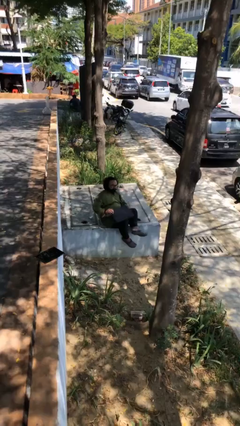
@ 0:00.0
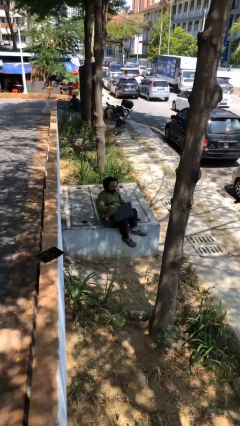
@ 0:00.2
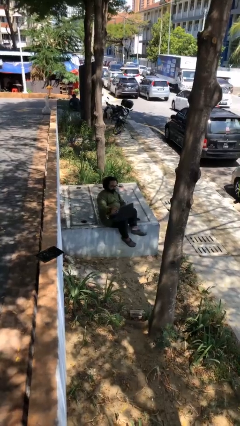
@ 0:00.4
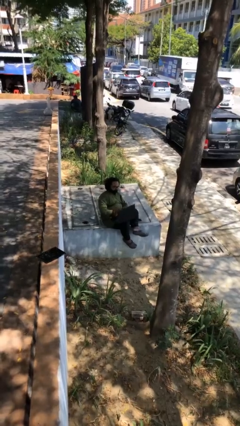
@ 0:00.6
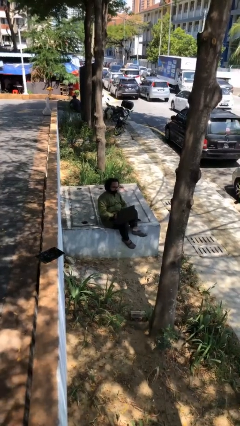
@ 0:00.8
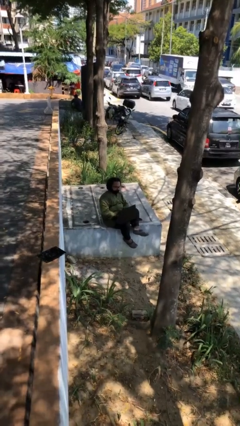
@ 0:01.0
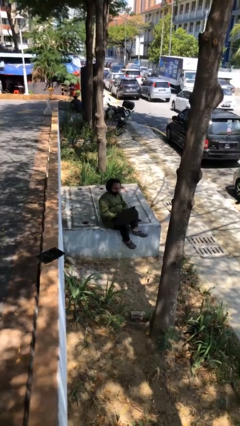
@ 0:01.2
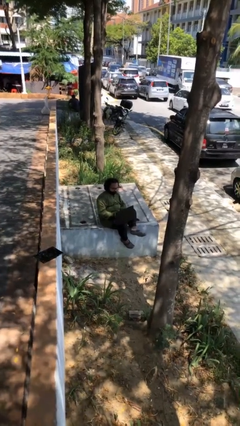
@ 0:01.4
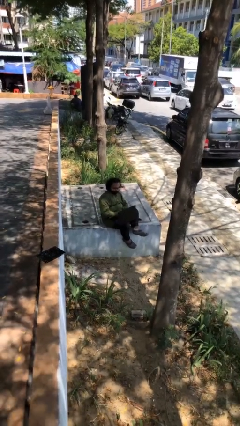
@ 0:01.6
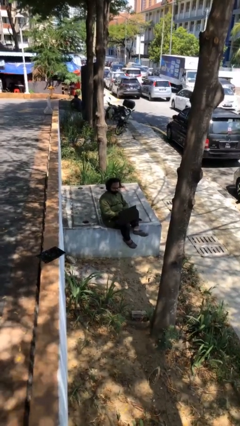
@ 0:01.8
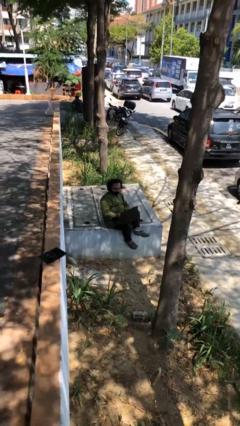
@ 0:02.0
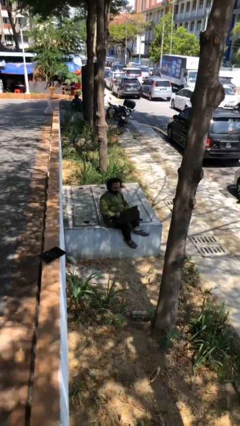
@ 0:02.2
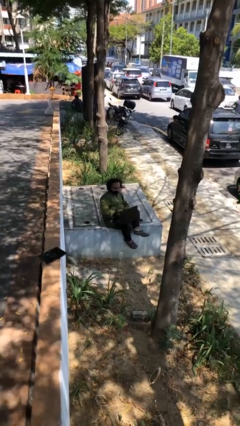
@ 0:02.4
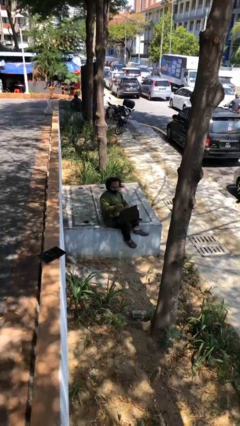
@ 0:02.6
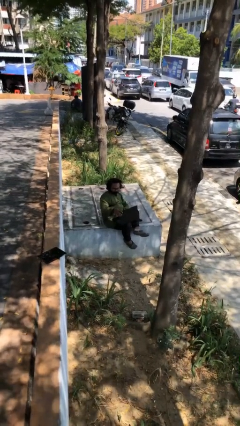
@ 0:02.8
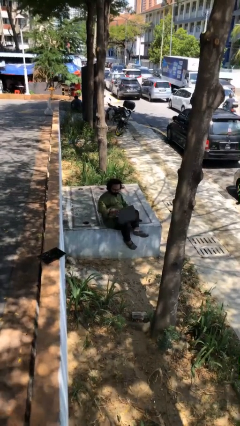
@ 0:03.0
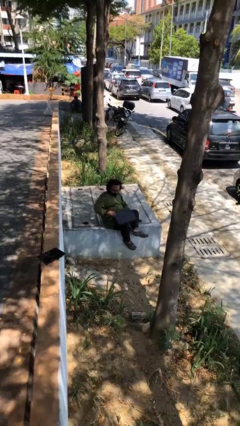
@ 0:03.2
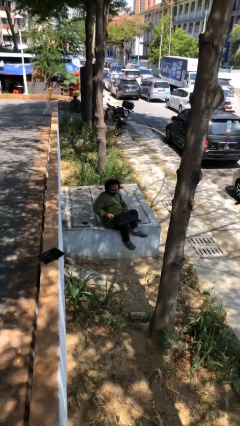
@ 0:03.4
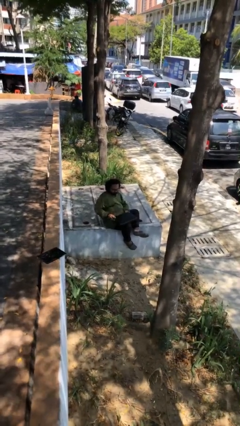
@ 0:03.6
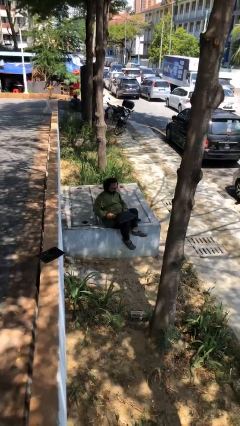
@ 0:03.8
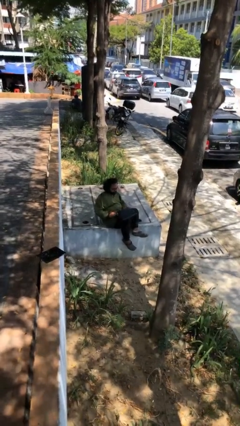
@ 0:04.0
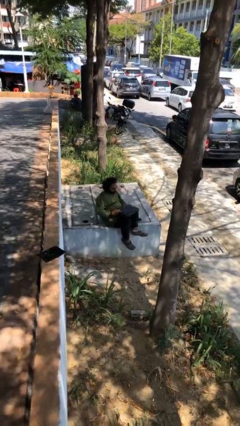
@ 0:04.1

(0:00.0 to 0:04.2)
person interacts with laptop

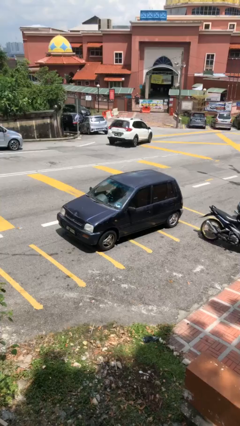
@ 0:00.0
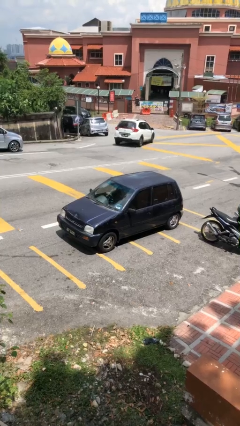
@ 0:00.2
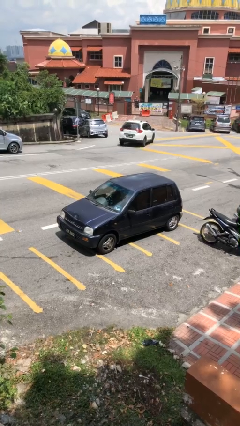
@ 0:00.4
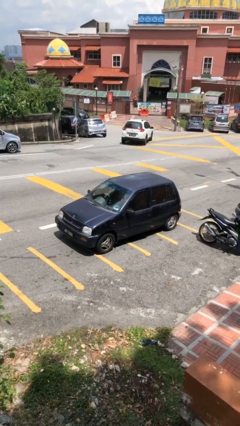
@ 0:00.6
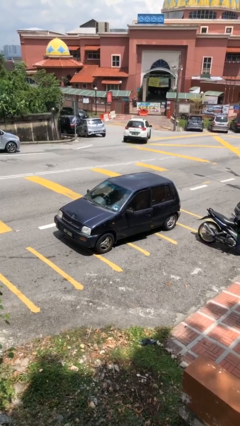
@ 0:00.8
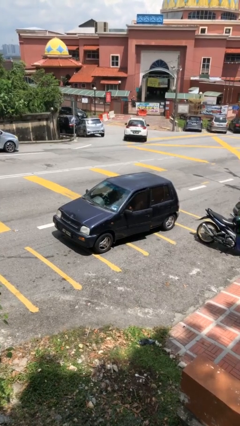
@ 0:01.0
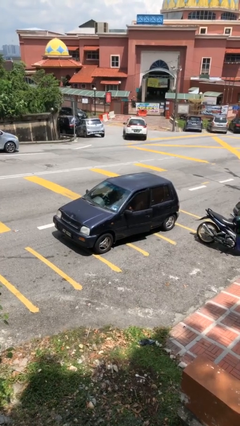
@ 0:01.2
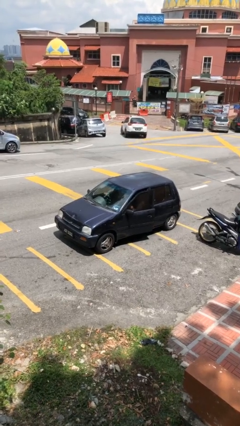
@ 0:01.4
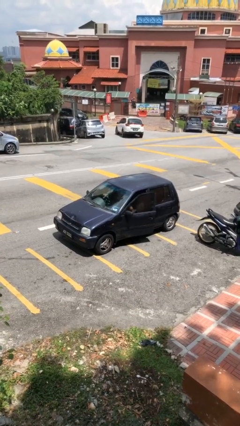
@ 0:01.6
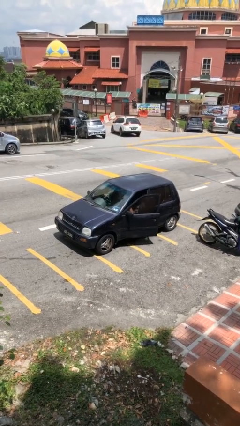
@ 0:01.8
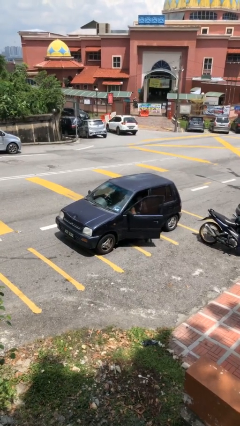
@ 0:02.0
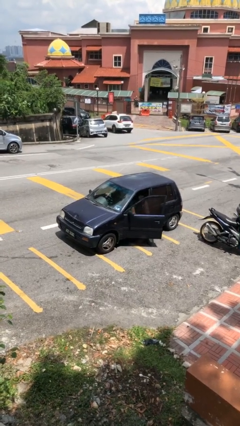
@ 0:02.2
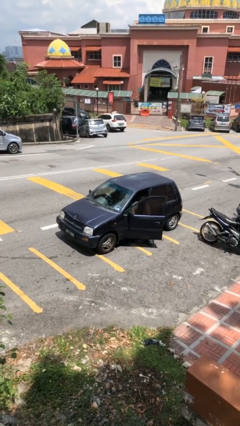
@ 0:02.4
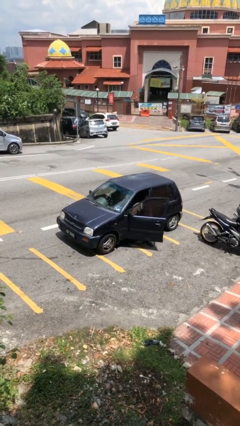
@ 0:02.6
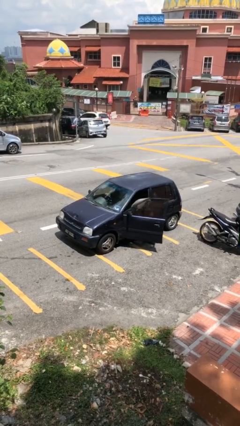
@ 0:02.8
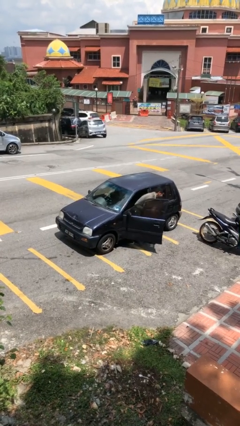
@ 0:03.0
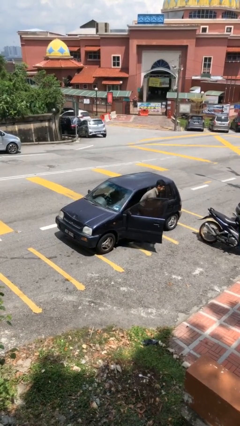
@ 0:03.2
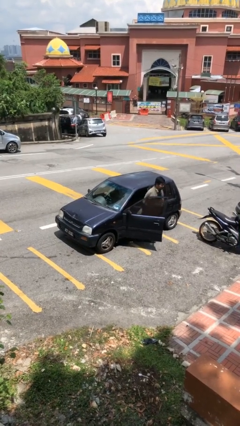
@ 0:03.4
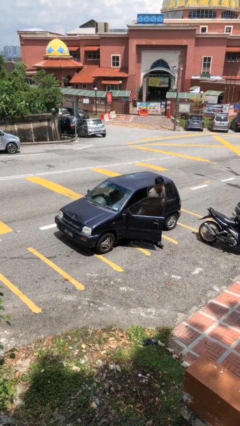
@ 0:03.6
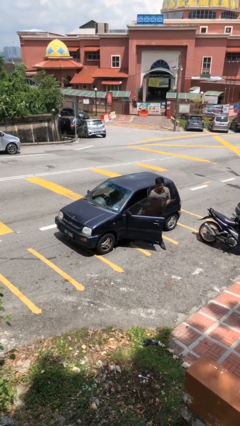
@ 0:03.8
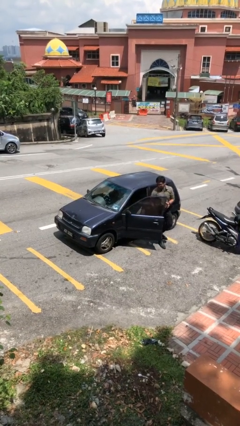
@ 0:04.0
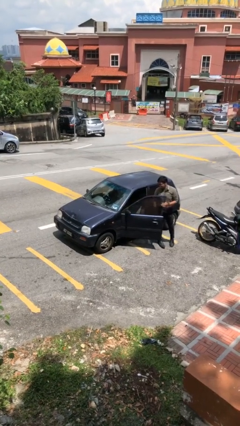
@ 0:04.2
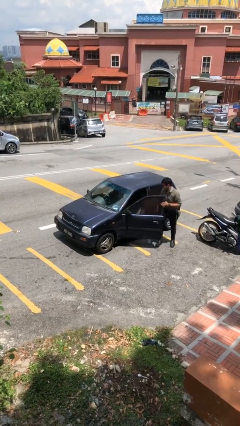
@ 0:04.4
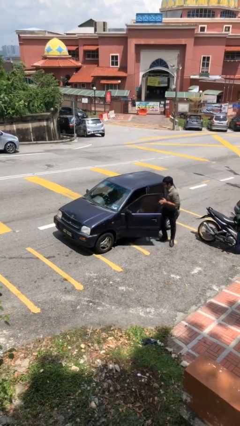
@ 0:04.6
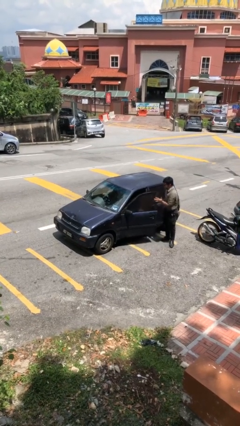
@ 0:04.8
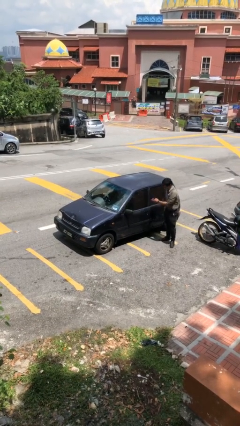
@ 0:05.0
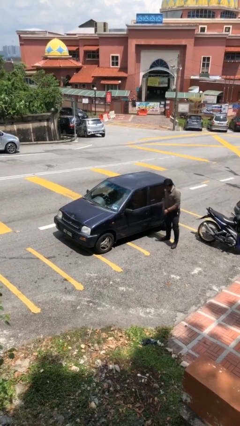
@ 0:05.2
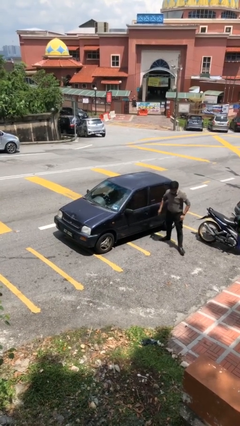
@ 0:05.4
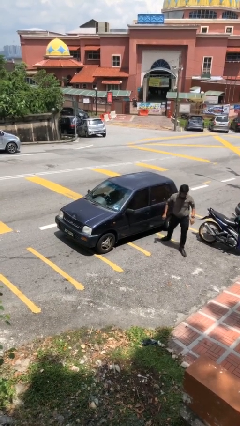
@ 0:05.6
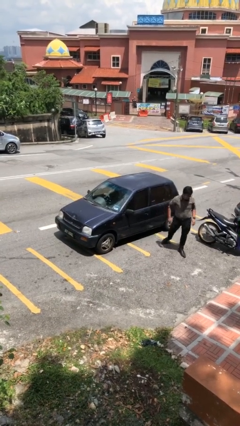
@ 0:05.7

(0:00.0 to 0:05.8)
car drops off person

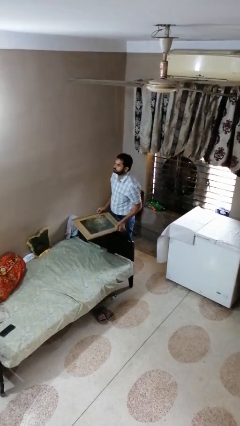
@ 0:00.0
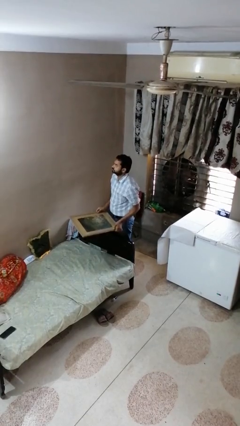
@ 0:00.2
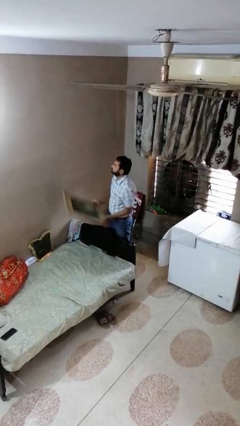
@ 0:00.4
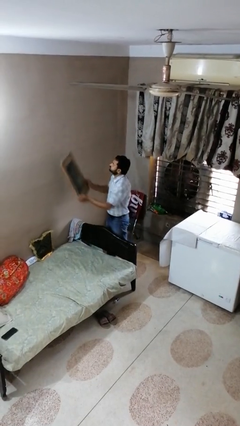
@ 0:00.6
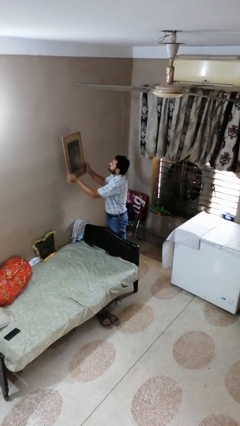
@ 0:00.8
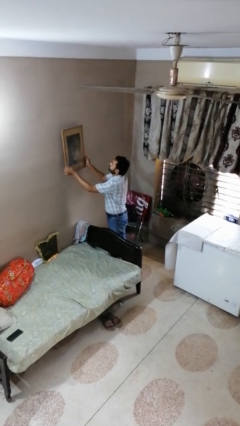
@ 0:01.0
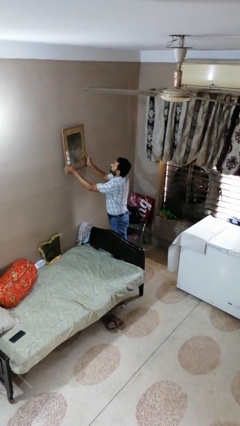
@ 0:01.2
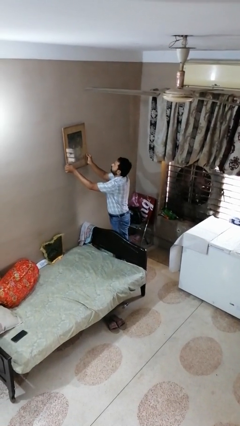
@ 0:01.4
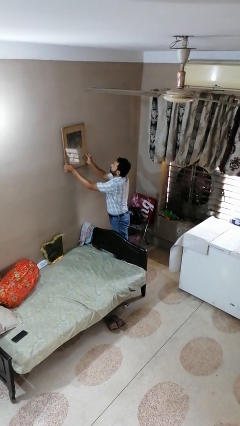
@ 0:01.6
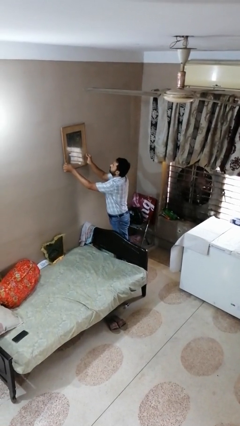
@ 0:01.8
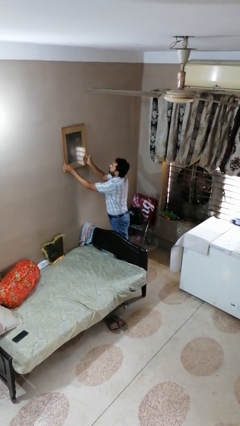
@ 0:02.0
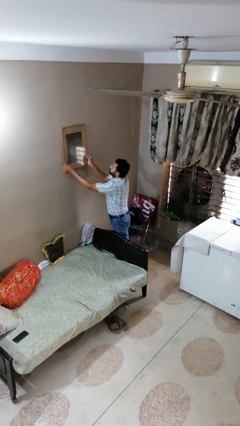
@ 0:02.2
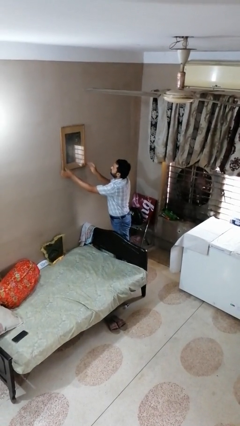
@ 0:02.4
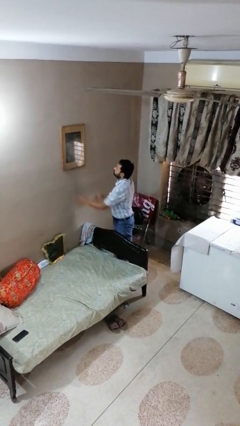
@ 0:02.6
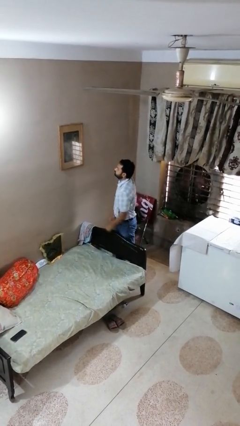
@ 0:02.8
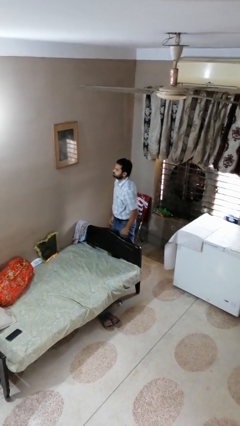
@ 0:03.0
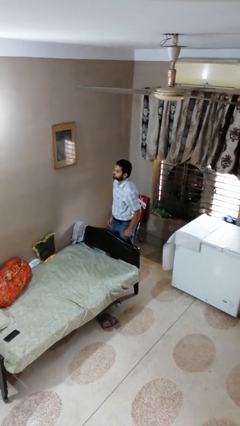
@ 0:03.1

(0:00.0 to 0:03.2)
person puts up picture frame

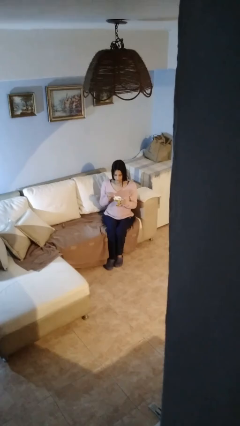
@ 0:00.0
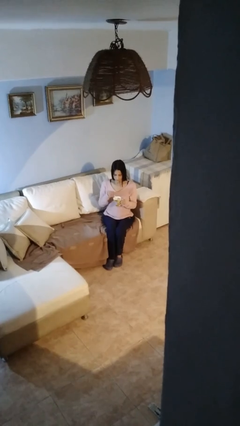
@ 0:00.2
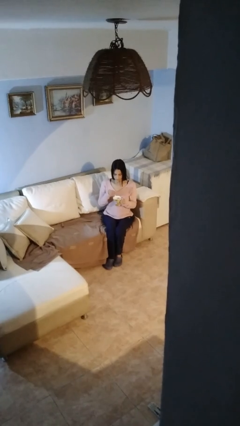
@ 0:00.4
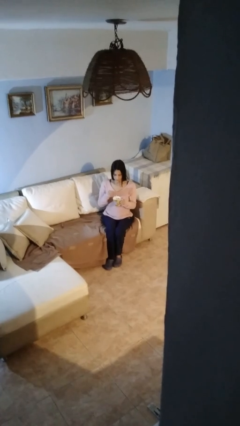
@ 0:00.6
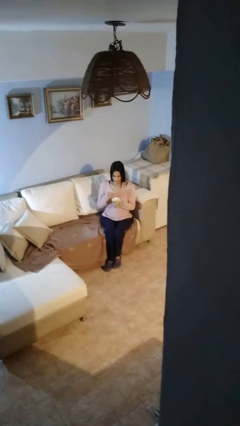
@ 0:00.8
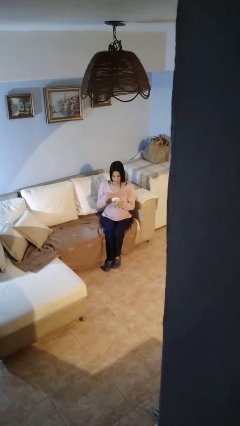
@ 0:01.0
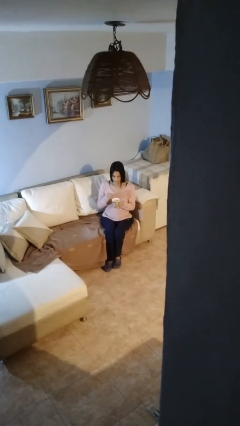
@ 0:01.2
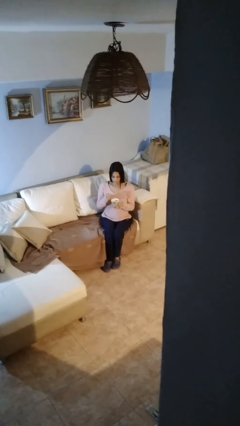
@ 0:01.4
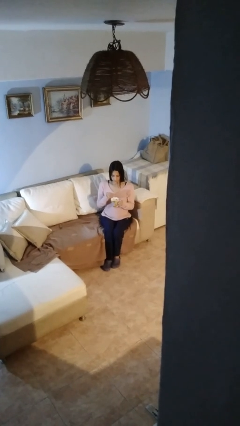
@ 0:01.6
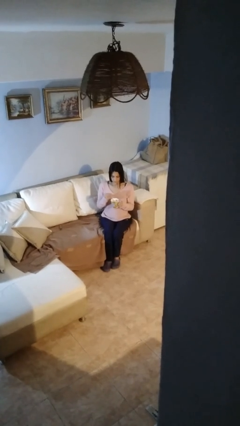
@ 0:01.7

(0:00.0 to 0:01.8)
person stirs mug

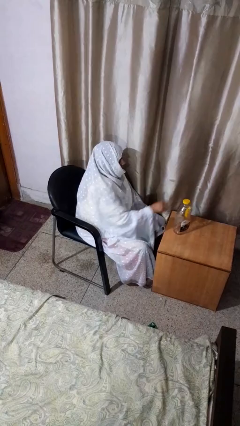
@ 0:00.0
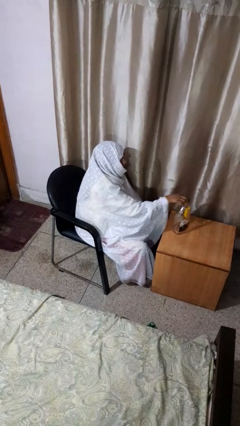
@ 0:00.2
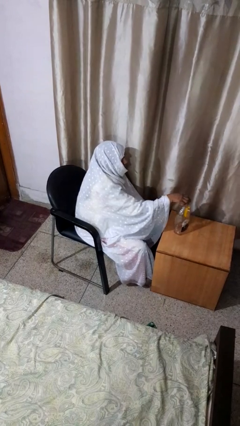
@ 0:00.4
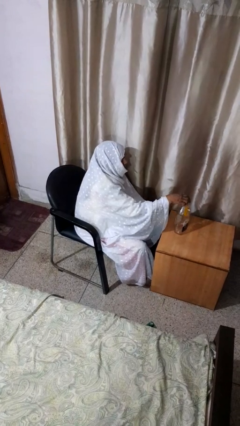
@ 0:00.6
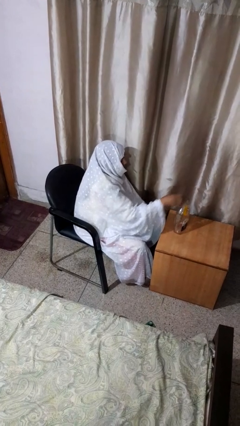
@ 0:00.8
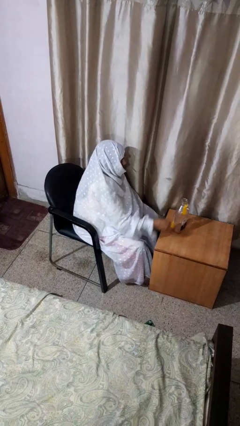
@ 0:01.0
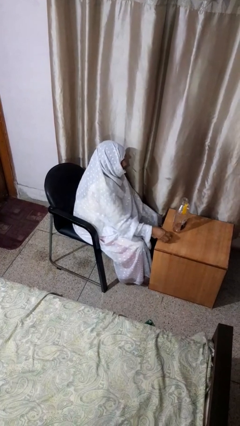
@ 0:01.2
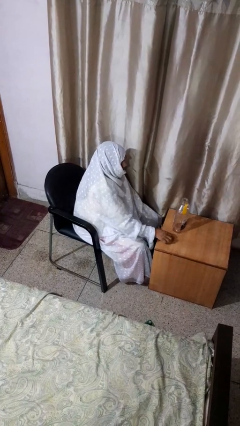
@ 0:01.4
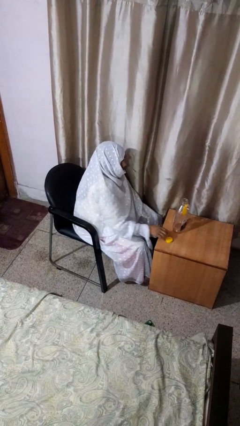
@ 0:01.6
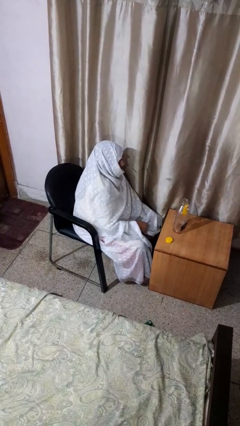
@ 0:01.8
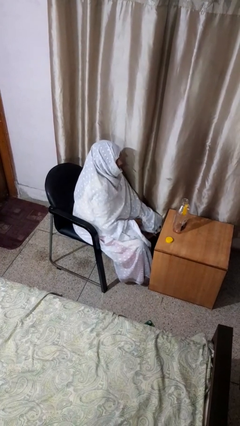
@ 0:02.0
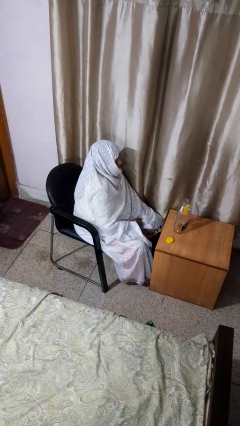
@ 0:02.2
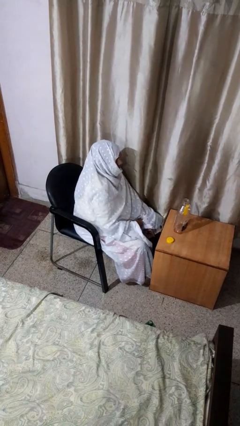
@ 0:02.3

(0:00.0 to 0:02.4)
person unscrews lid from bottle
